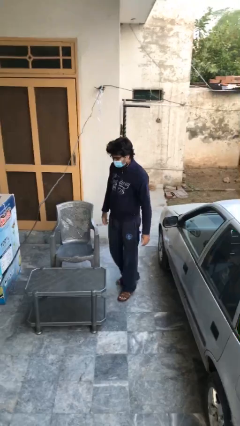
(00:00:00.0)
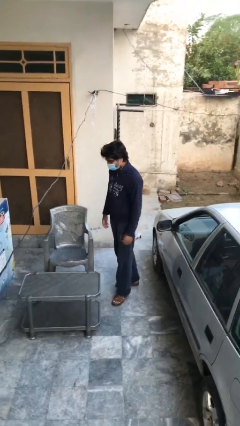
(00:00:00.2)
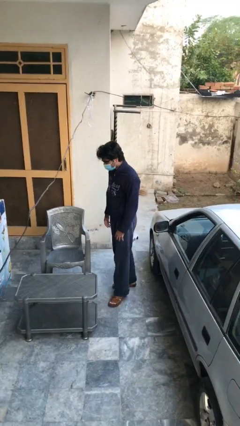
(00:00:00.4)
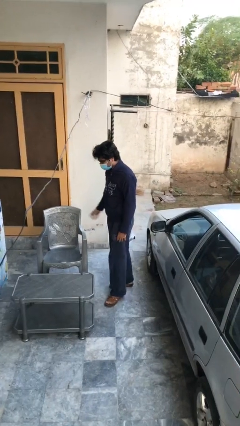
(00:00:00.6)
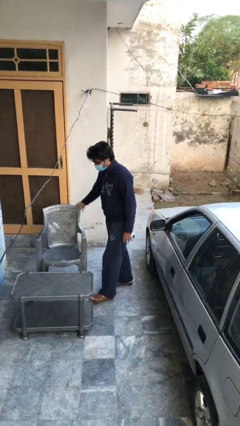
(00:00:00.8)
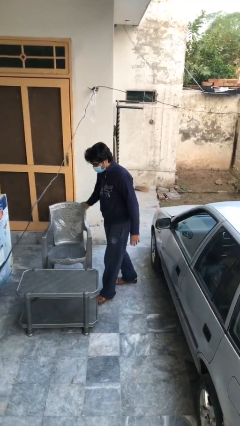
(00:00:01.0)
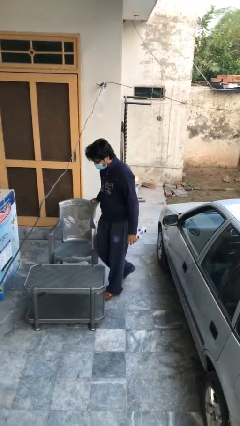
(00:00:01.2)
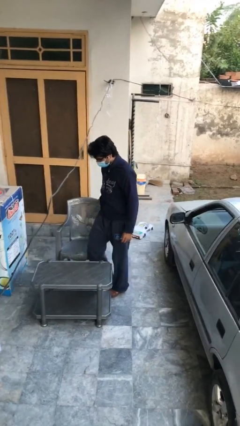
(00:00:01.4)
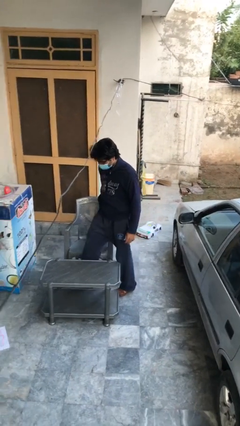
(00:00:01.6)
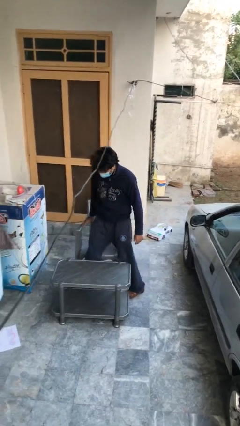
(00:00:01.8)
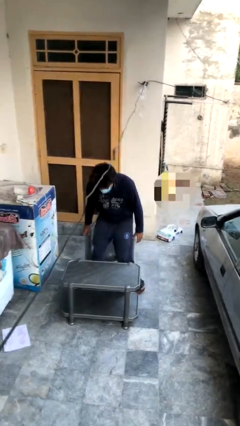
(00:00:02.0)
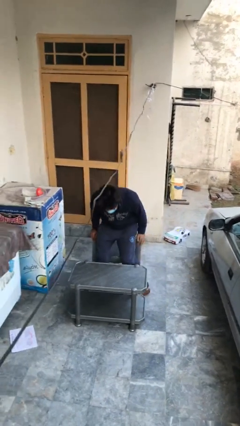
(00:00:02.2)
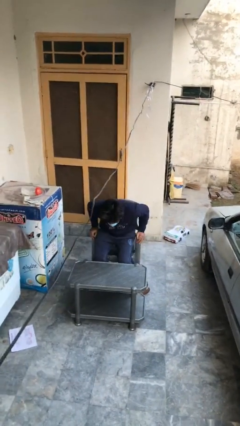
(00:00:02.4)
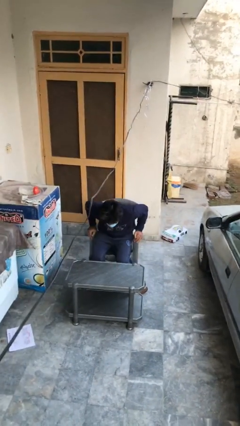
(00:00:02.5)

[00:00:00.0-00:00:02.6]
person sits down

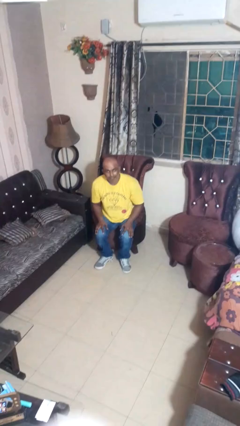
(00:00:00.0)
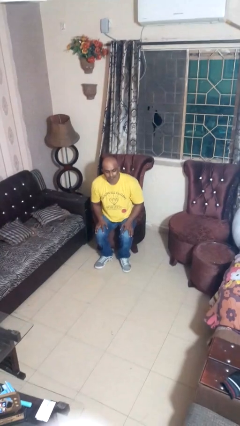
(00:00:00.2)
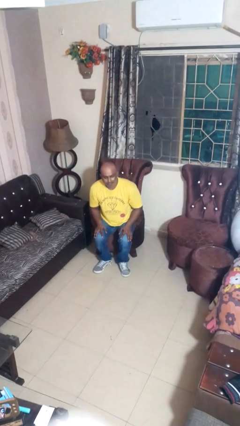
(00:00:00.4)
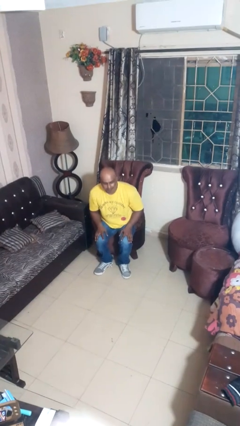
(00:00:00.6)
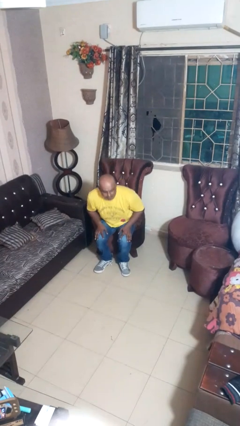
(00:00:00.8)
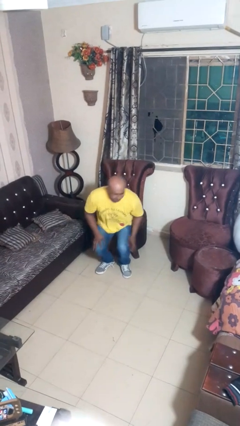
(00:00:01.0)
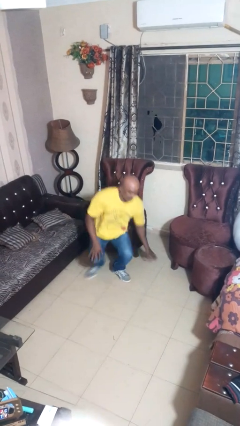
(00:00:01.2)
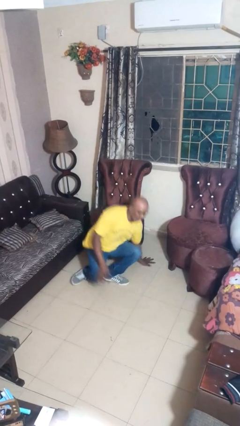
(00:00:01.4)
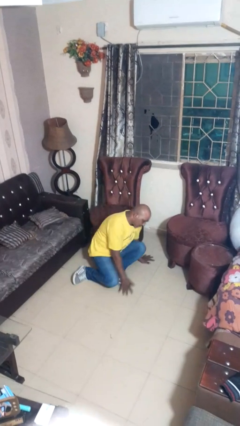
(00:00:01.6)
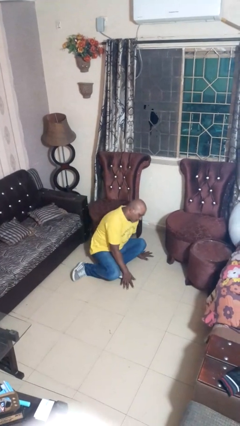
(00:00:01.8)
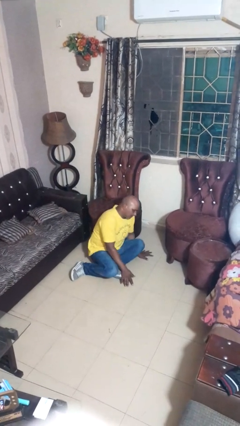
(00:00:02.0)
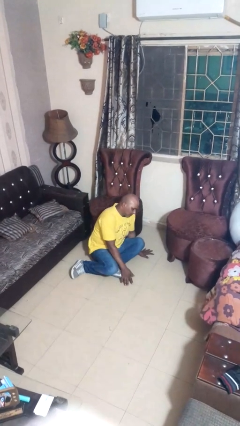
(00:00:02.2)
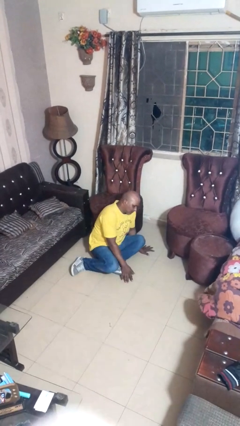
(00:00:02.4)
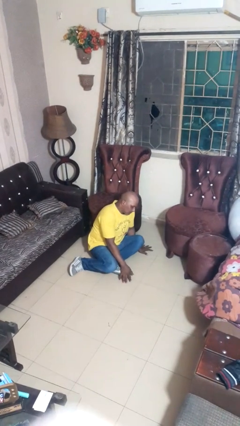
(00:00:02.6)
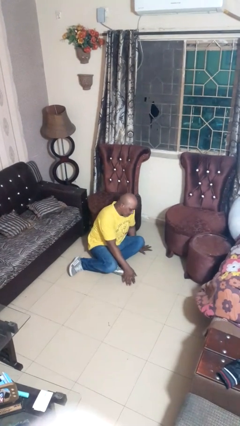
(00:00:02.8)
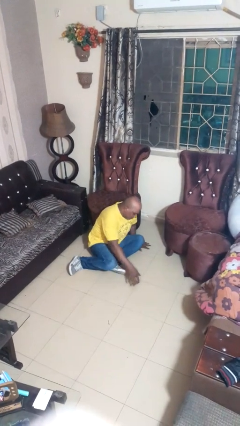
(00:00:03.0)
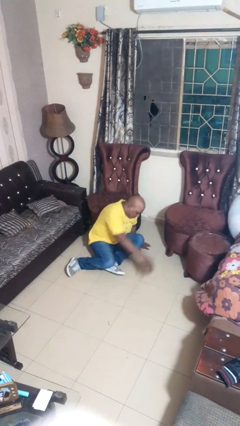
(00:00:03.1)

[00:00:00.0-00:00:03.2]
person falls from chair

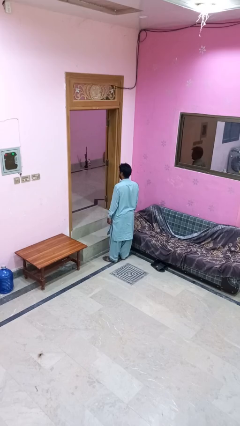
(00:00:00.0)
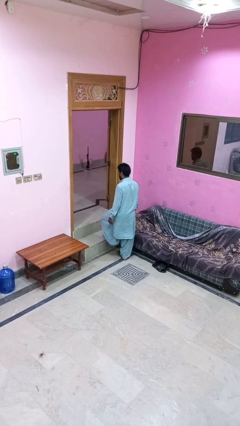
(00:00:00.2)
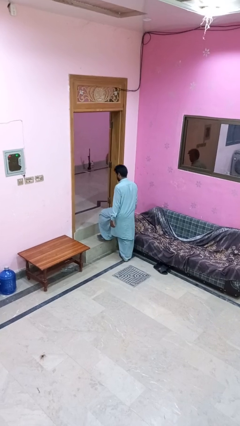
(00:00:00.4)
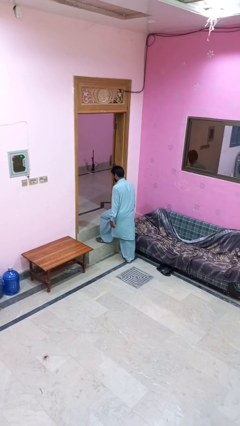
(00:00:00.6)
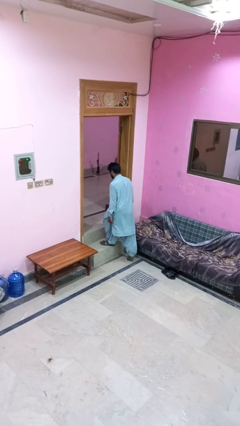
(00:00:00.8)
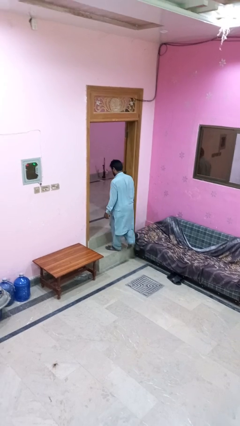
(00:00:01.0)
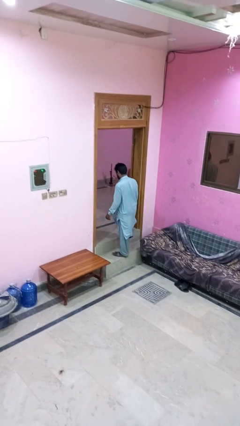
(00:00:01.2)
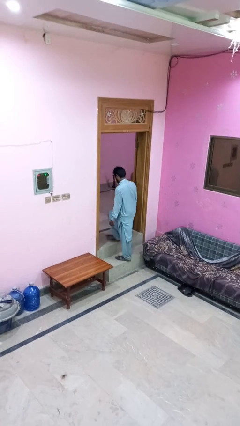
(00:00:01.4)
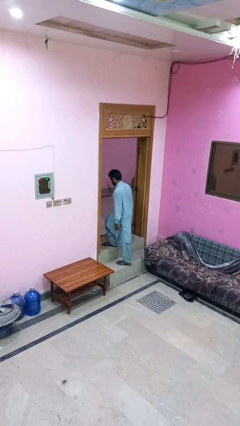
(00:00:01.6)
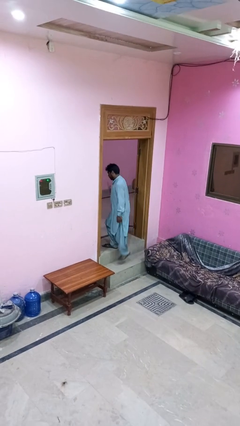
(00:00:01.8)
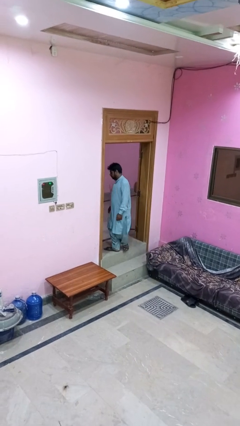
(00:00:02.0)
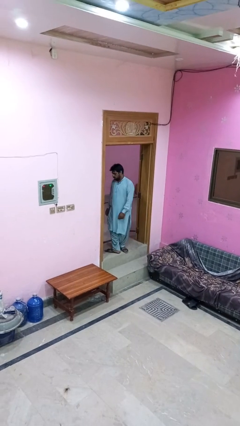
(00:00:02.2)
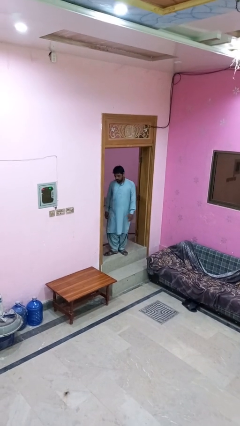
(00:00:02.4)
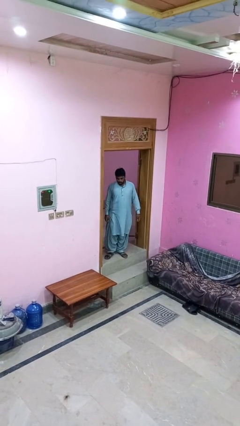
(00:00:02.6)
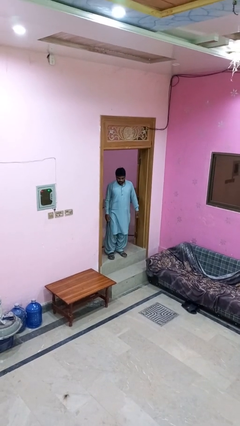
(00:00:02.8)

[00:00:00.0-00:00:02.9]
person climbs up stairs

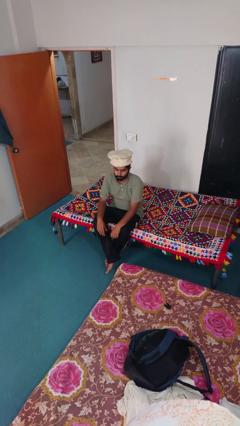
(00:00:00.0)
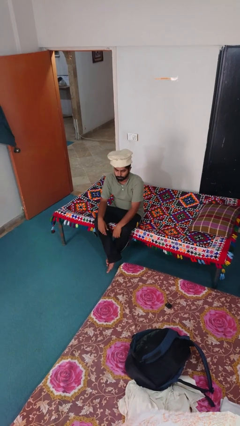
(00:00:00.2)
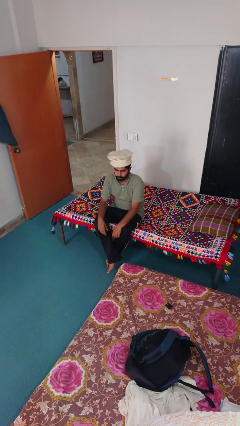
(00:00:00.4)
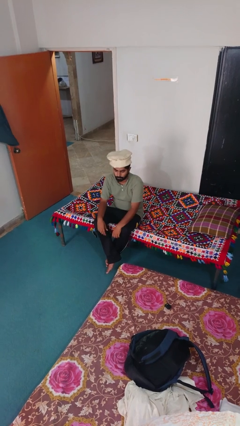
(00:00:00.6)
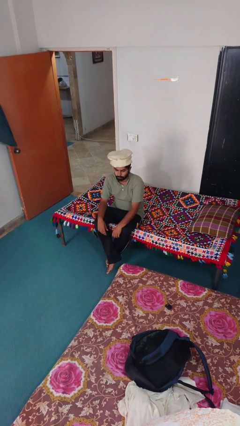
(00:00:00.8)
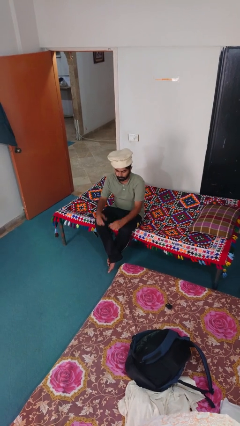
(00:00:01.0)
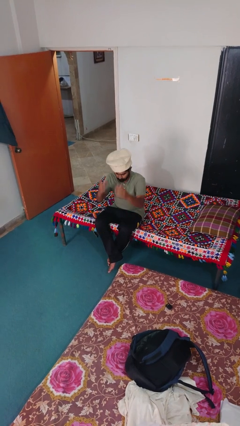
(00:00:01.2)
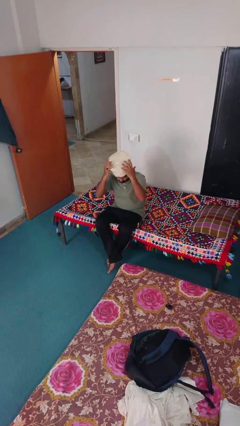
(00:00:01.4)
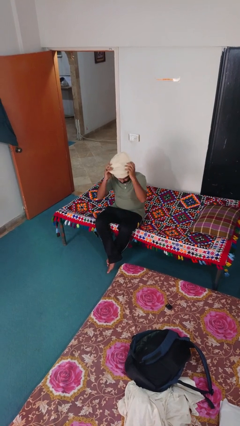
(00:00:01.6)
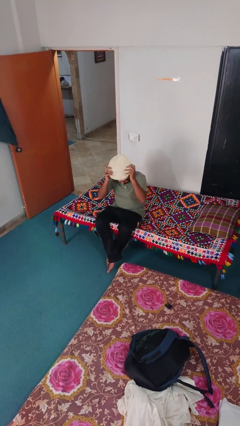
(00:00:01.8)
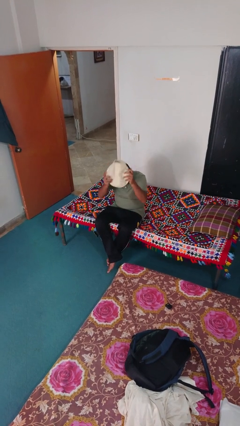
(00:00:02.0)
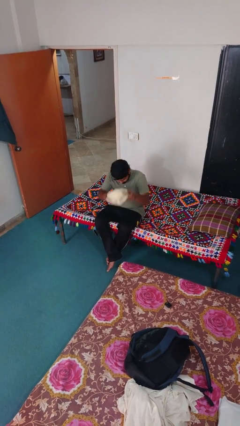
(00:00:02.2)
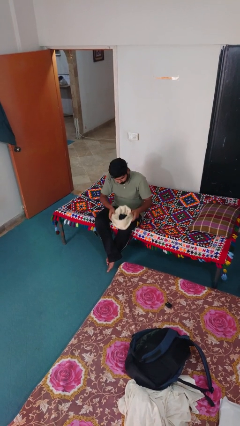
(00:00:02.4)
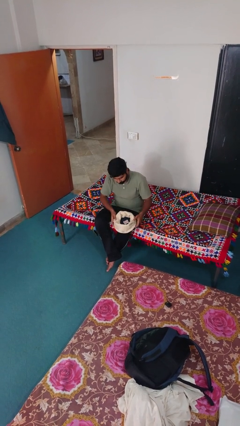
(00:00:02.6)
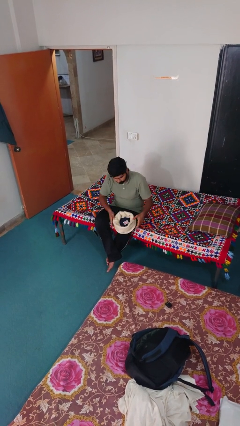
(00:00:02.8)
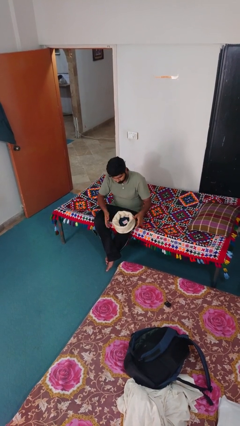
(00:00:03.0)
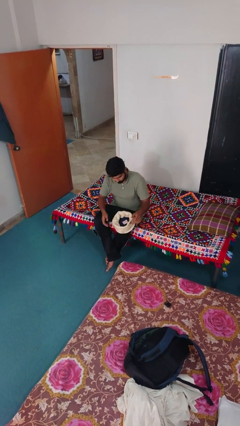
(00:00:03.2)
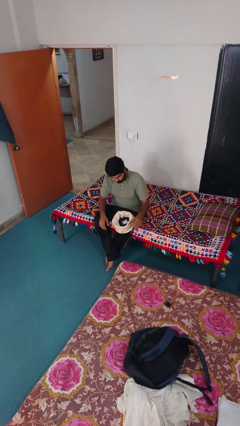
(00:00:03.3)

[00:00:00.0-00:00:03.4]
person takes off hat

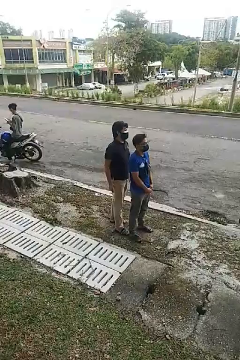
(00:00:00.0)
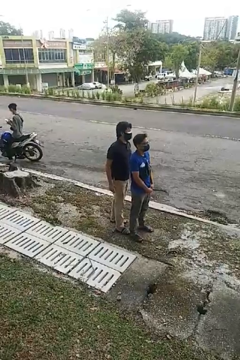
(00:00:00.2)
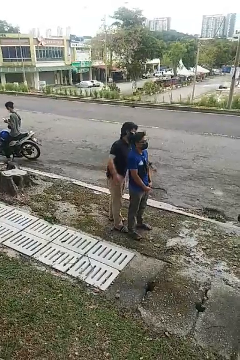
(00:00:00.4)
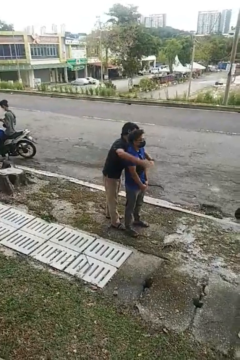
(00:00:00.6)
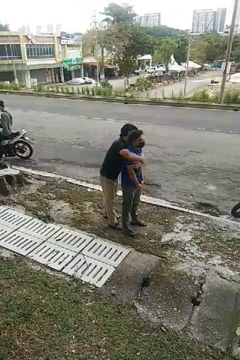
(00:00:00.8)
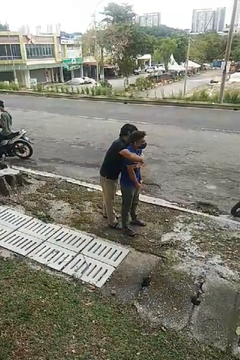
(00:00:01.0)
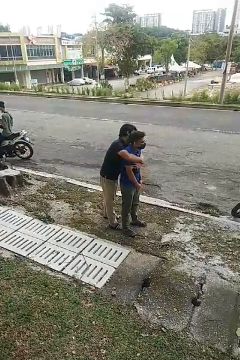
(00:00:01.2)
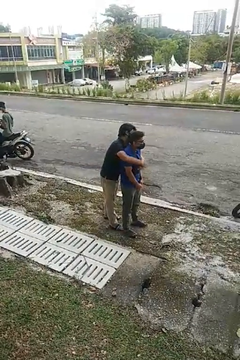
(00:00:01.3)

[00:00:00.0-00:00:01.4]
person hugs person from behind

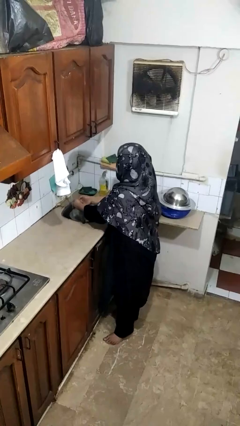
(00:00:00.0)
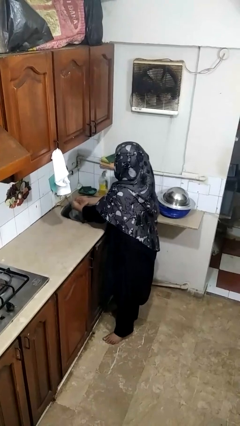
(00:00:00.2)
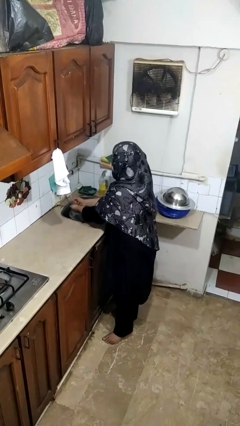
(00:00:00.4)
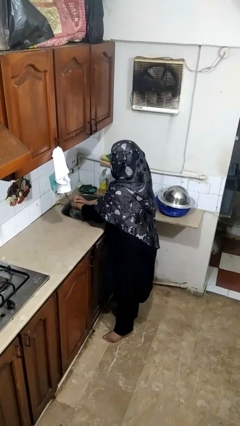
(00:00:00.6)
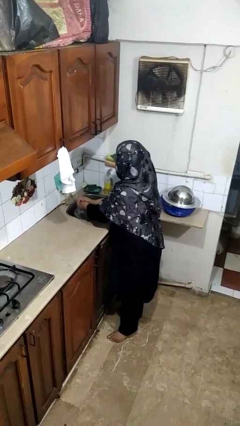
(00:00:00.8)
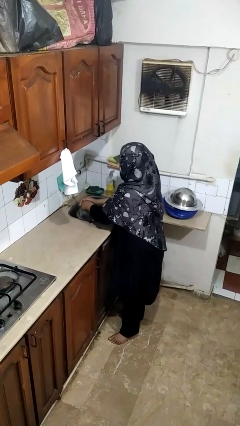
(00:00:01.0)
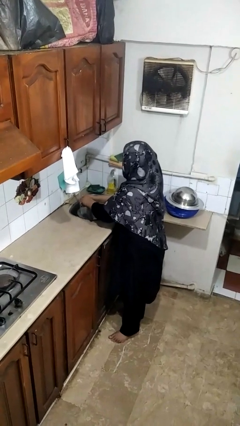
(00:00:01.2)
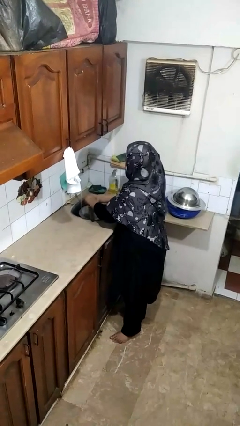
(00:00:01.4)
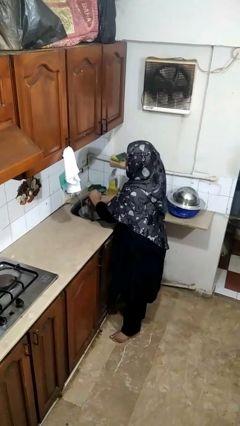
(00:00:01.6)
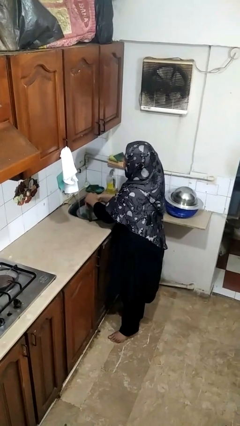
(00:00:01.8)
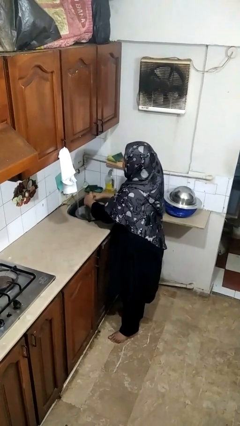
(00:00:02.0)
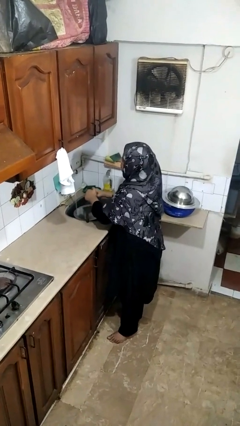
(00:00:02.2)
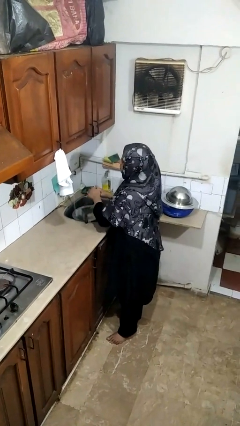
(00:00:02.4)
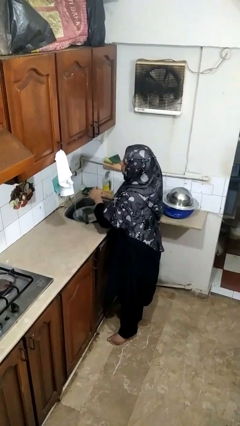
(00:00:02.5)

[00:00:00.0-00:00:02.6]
person washes hands

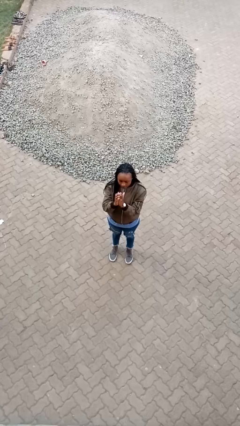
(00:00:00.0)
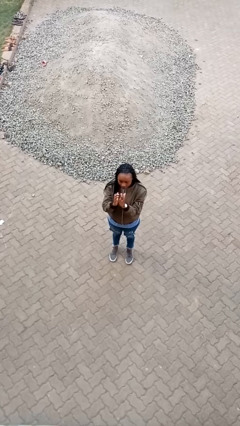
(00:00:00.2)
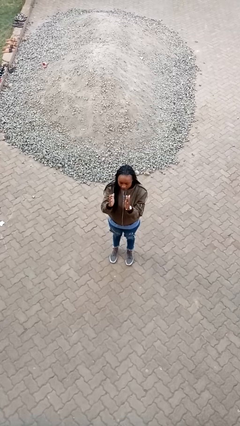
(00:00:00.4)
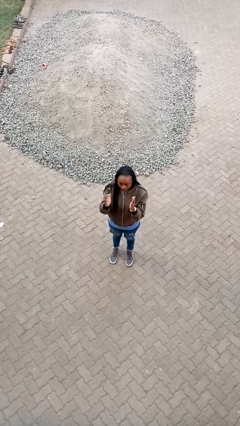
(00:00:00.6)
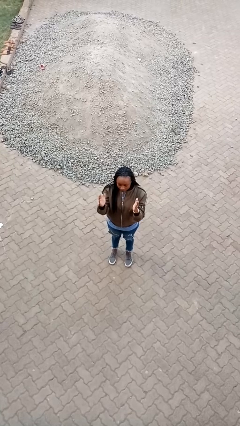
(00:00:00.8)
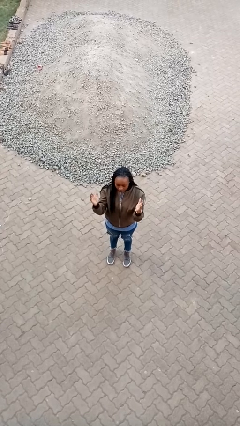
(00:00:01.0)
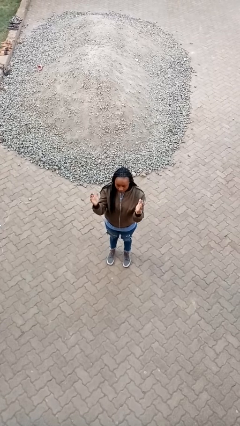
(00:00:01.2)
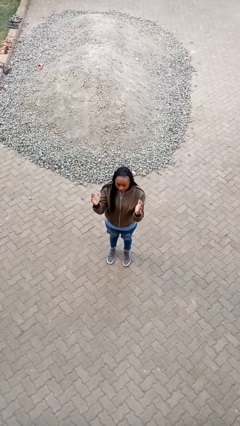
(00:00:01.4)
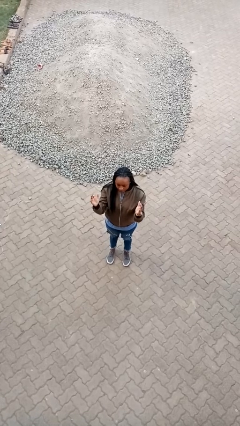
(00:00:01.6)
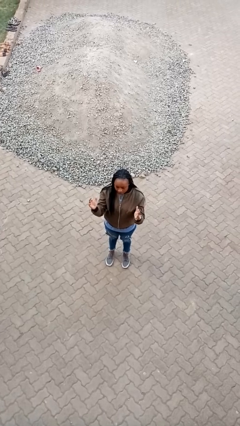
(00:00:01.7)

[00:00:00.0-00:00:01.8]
person gestures zoom out
